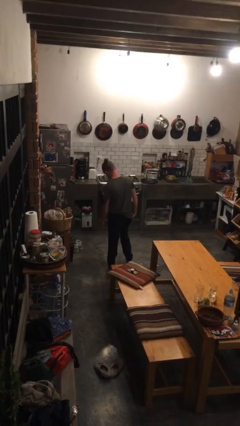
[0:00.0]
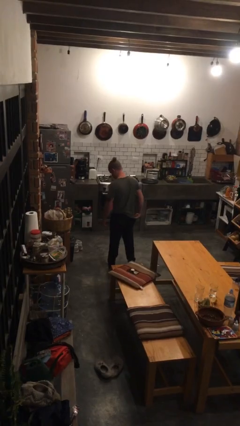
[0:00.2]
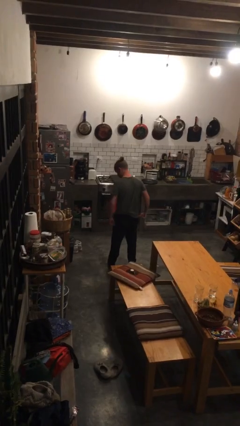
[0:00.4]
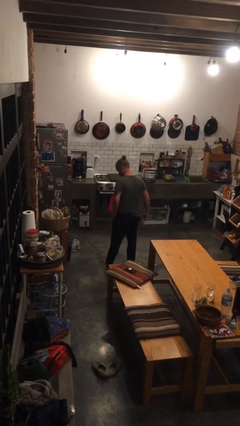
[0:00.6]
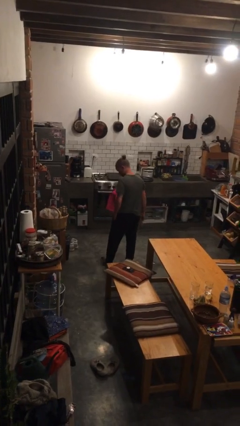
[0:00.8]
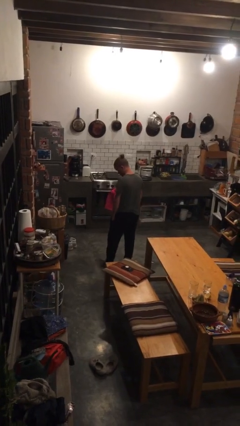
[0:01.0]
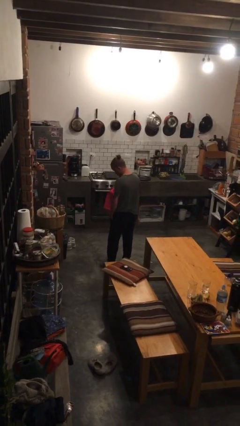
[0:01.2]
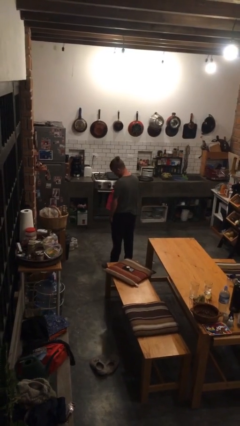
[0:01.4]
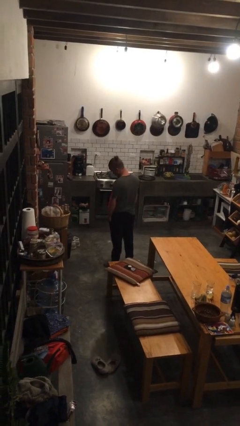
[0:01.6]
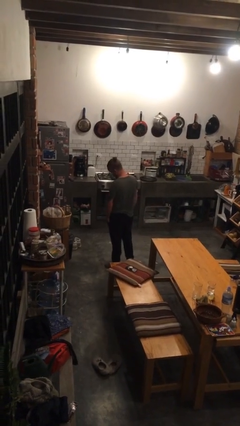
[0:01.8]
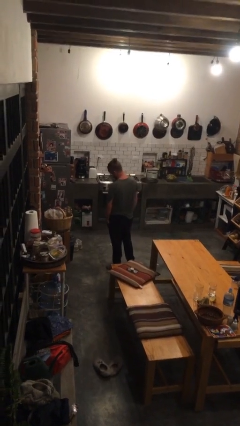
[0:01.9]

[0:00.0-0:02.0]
person puts hands in back pockets

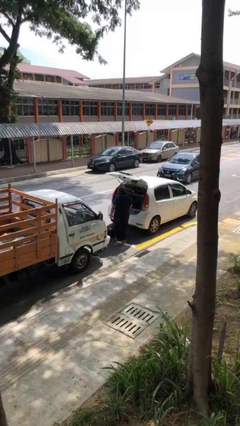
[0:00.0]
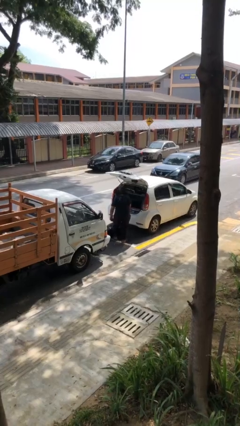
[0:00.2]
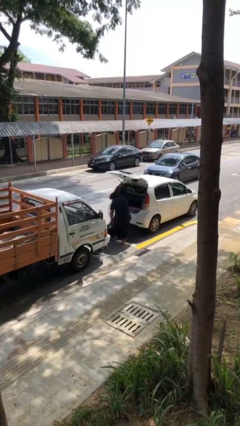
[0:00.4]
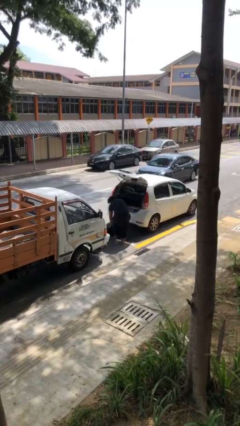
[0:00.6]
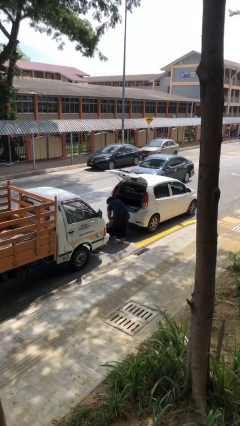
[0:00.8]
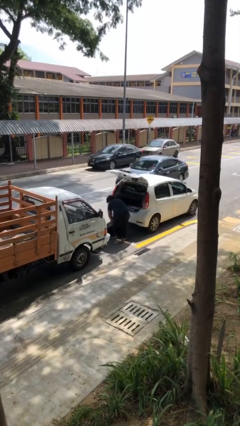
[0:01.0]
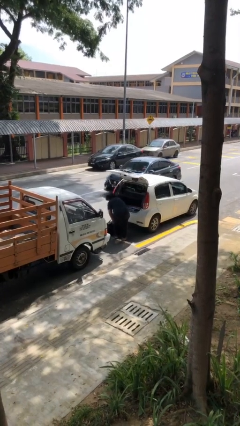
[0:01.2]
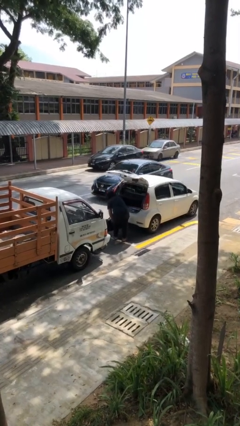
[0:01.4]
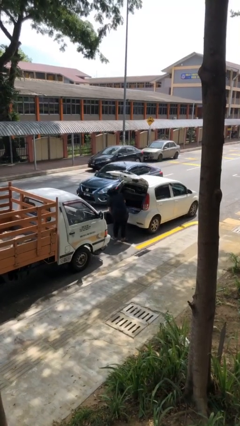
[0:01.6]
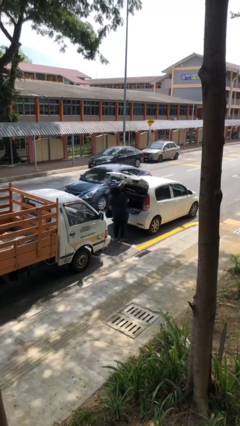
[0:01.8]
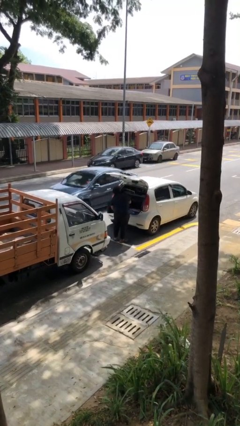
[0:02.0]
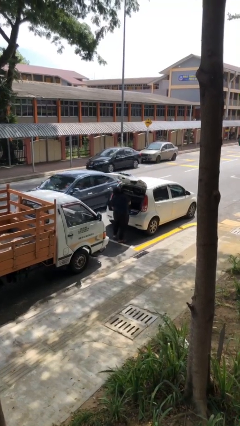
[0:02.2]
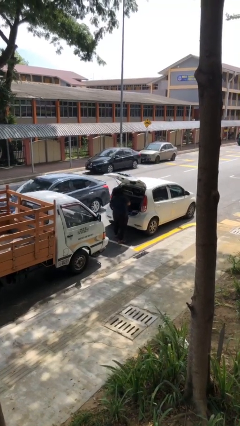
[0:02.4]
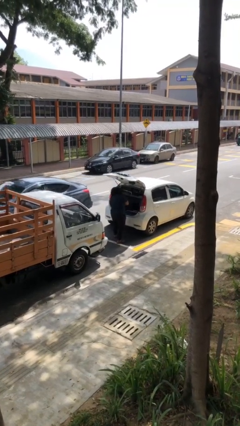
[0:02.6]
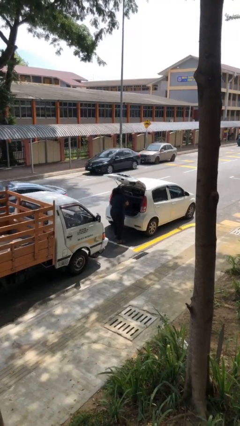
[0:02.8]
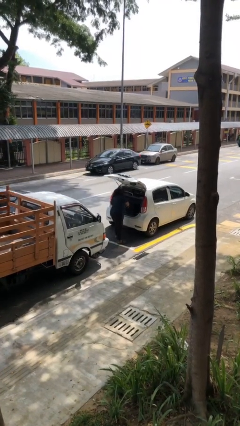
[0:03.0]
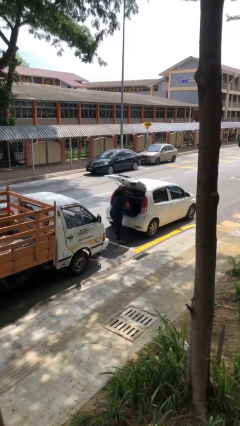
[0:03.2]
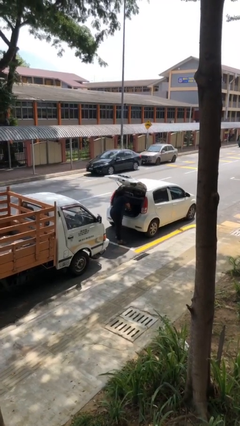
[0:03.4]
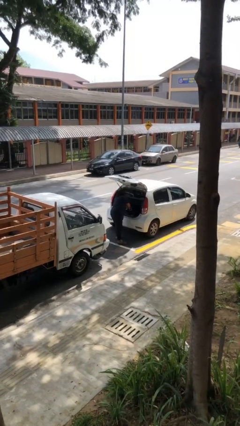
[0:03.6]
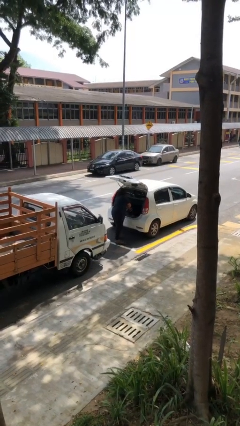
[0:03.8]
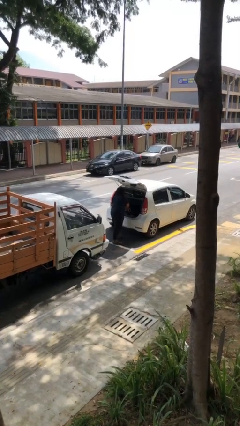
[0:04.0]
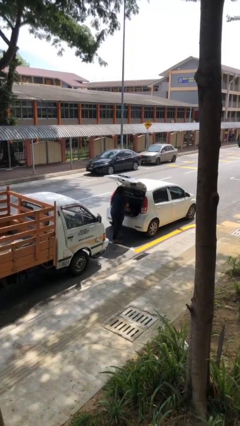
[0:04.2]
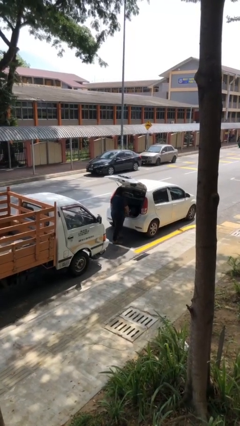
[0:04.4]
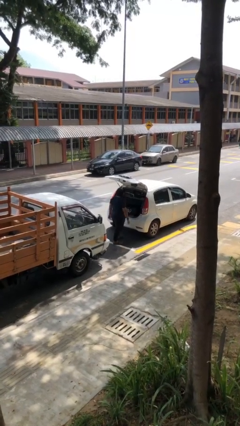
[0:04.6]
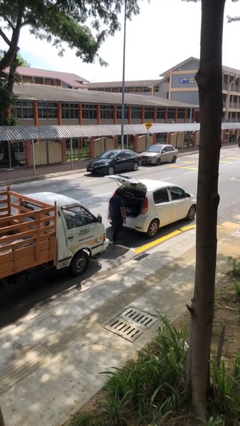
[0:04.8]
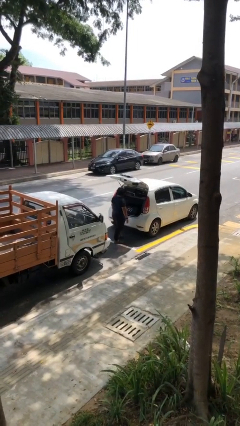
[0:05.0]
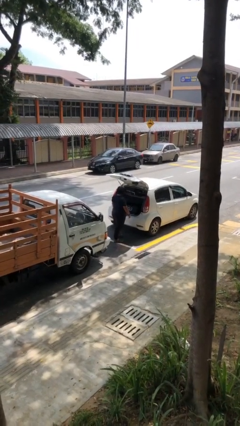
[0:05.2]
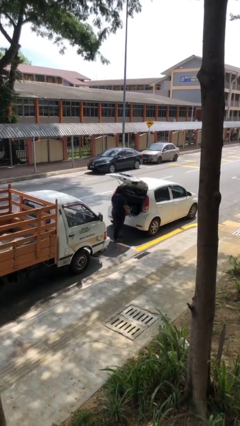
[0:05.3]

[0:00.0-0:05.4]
person loads car

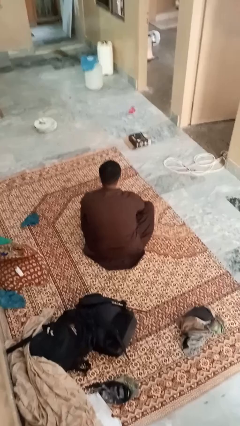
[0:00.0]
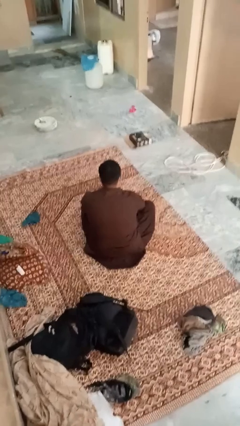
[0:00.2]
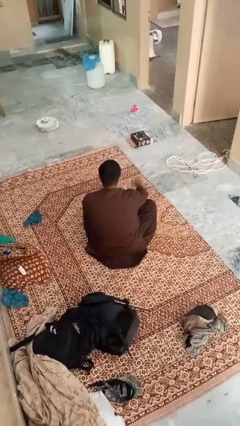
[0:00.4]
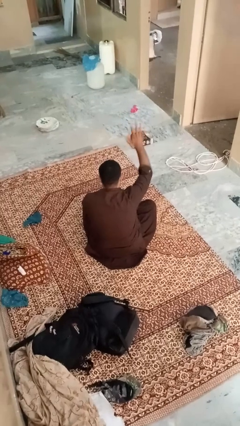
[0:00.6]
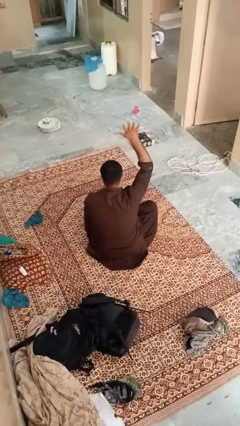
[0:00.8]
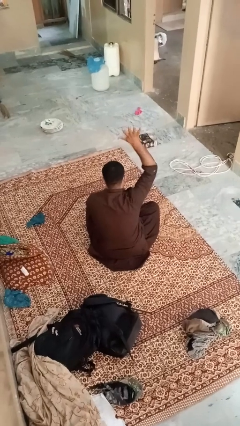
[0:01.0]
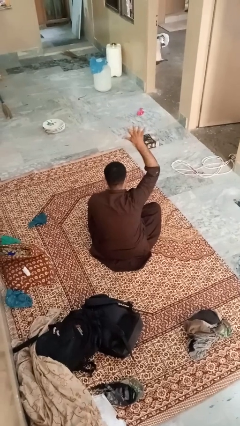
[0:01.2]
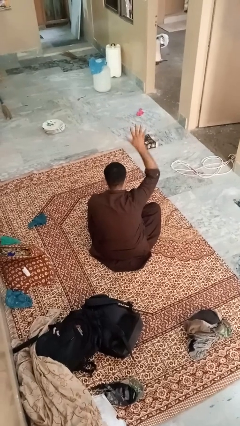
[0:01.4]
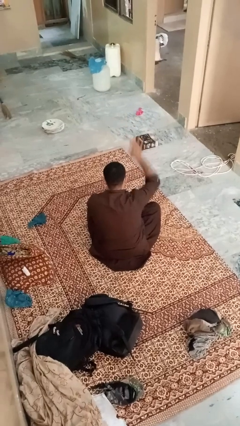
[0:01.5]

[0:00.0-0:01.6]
person gestures number five

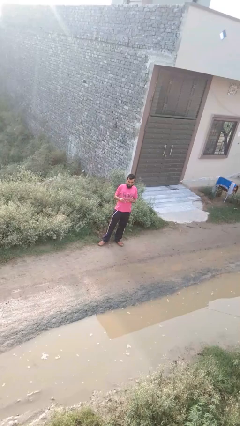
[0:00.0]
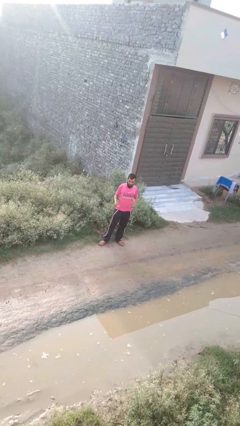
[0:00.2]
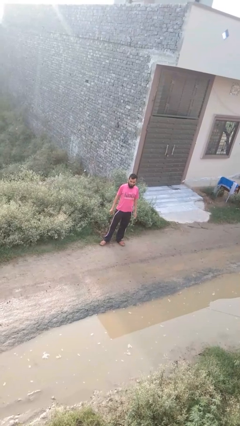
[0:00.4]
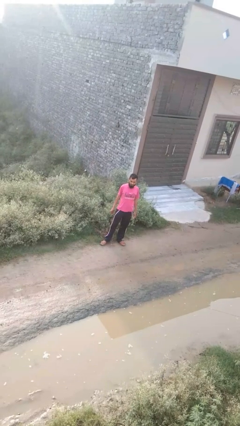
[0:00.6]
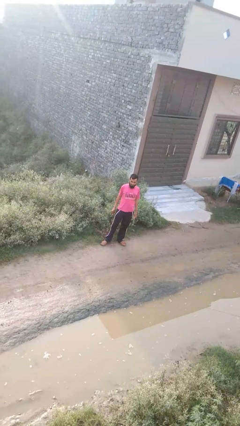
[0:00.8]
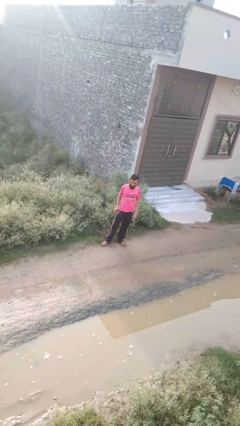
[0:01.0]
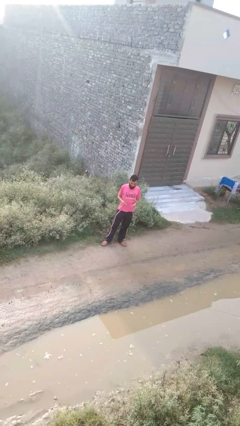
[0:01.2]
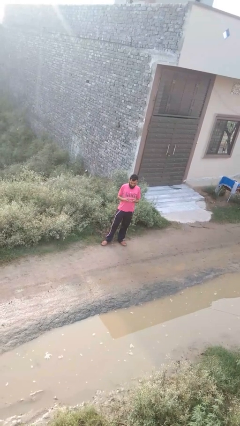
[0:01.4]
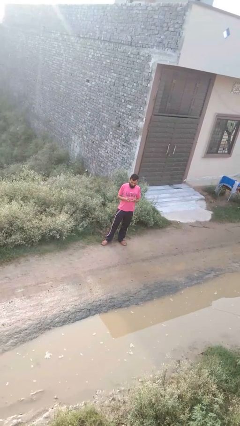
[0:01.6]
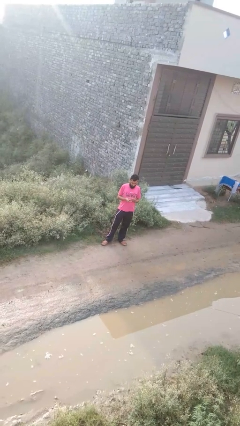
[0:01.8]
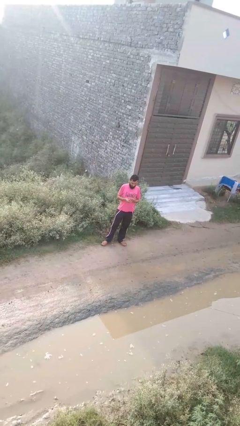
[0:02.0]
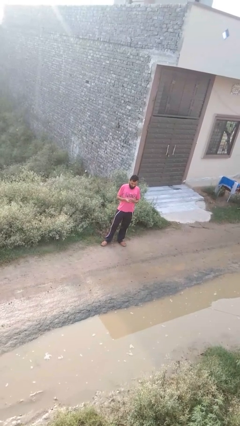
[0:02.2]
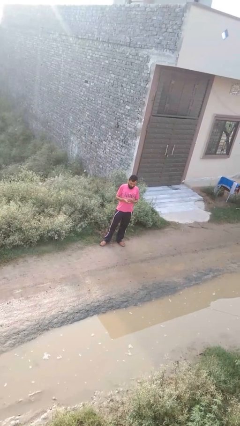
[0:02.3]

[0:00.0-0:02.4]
person puts on ring

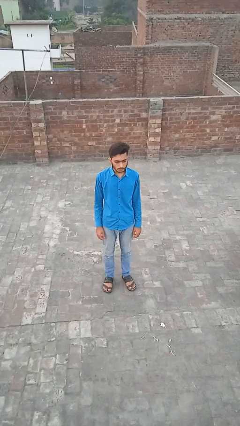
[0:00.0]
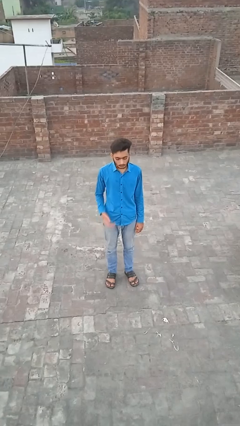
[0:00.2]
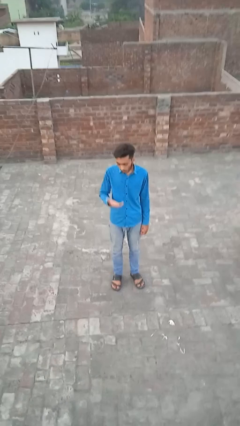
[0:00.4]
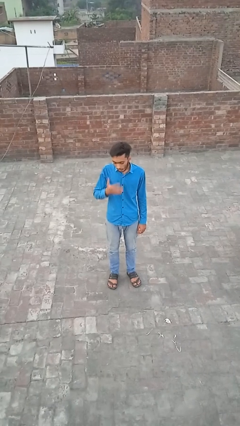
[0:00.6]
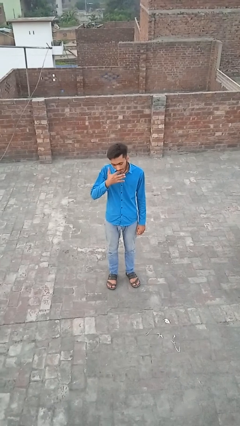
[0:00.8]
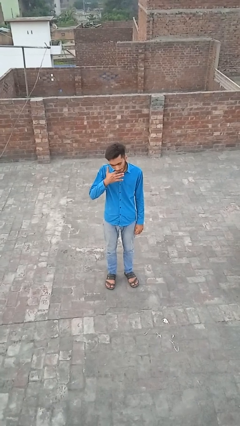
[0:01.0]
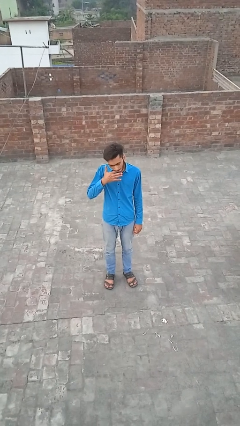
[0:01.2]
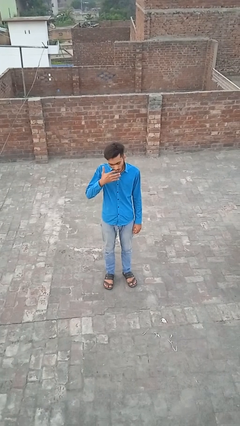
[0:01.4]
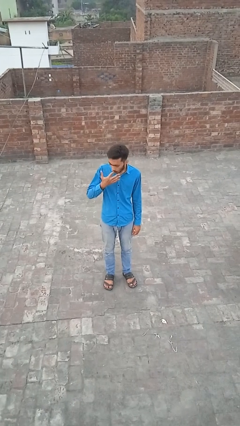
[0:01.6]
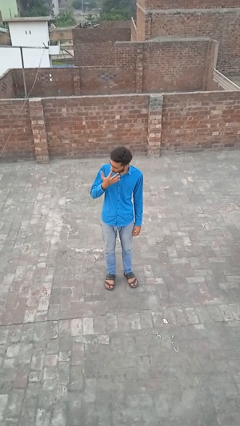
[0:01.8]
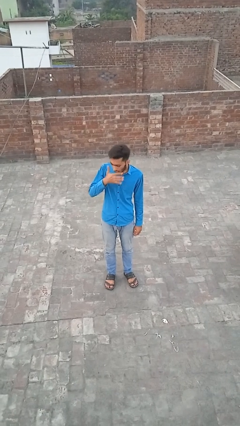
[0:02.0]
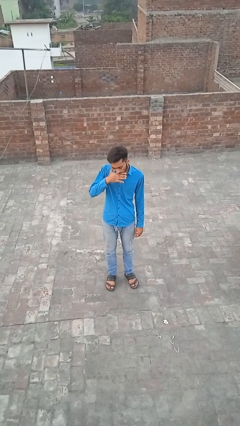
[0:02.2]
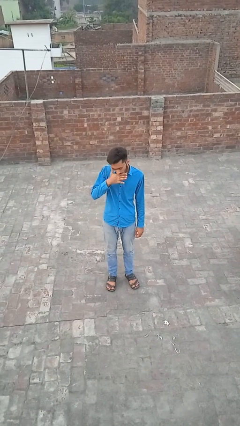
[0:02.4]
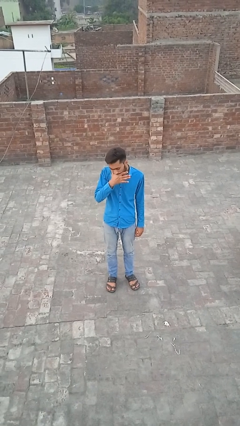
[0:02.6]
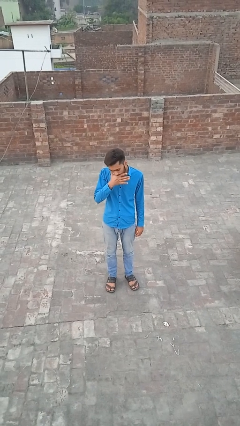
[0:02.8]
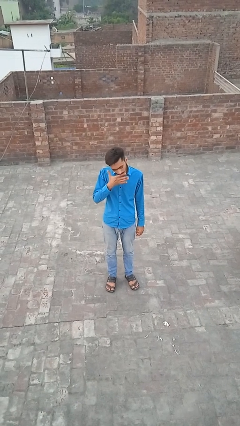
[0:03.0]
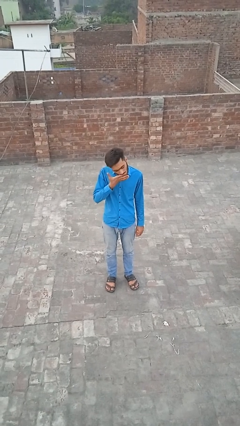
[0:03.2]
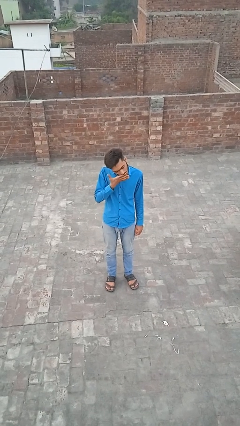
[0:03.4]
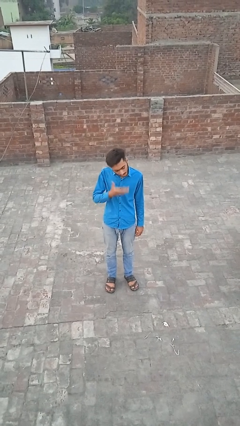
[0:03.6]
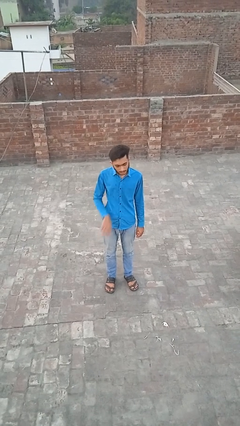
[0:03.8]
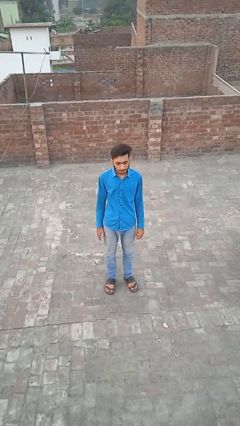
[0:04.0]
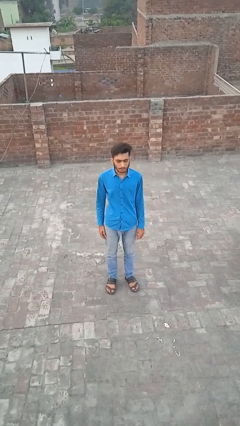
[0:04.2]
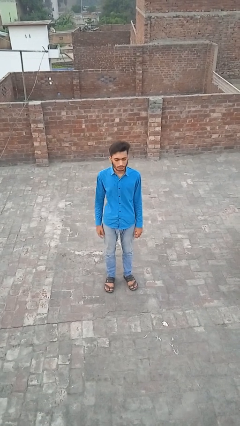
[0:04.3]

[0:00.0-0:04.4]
person licks fingers

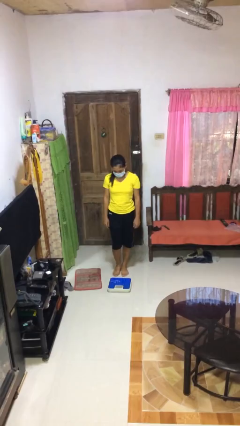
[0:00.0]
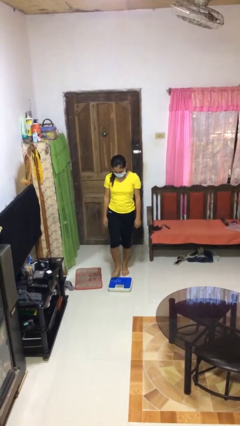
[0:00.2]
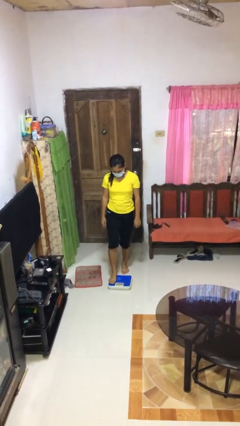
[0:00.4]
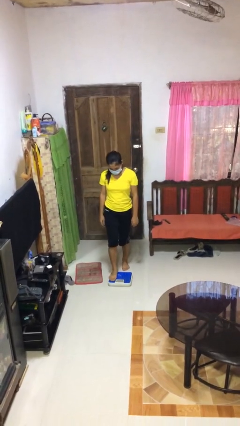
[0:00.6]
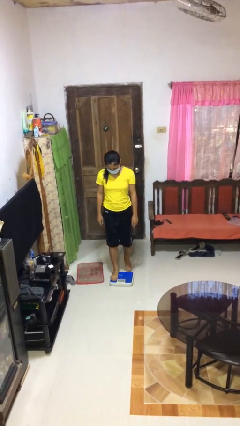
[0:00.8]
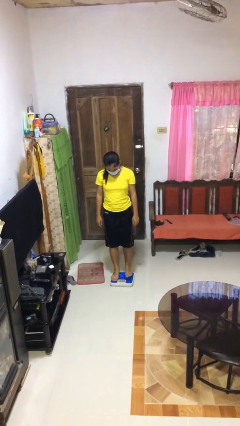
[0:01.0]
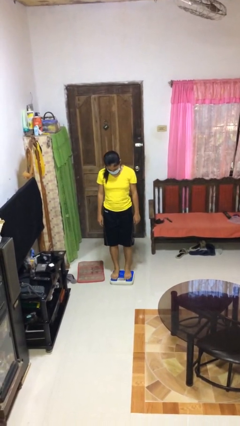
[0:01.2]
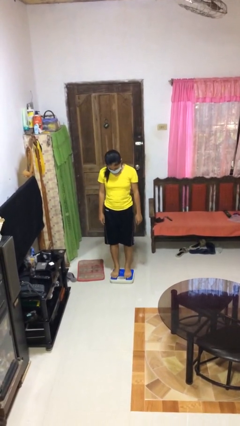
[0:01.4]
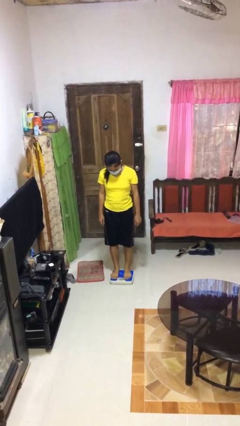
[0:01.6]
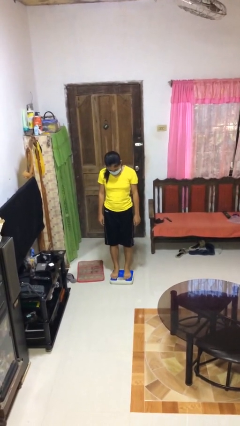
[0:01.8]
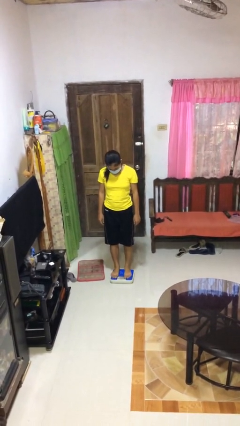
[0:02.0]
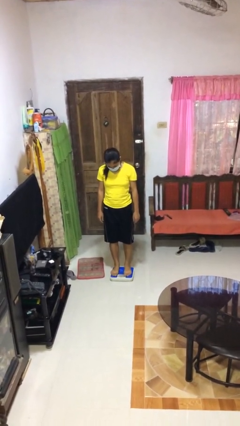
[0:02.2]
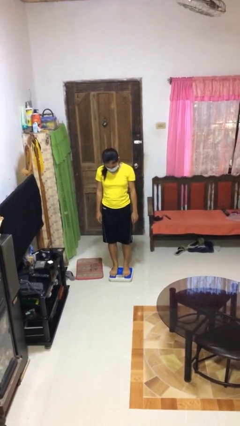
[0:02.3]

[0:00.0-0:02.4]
person uses bodyweight scale
